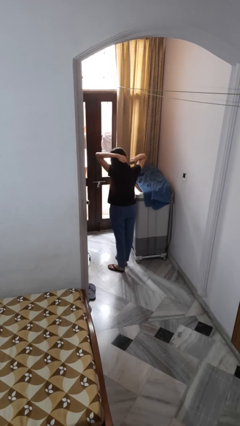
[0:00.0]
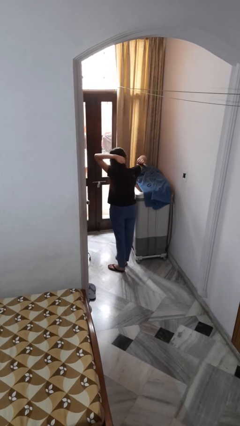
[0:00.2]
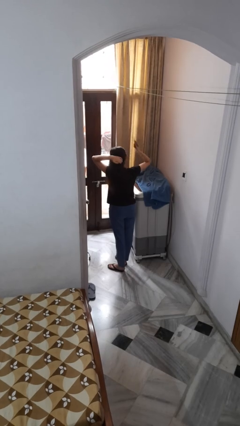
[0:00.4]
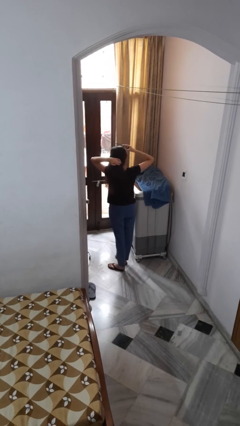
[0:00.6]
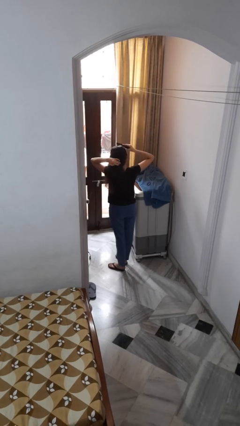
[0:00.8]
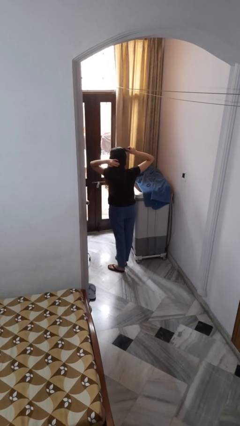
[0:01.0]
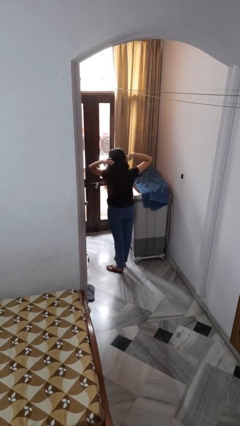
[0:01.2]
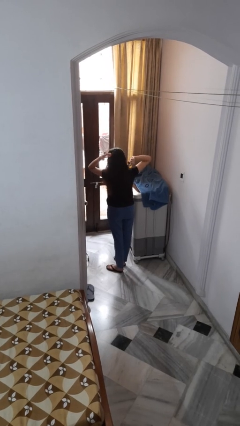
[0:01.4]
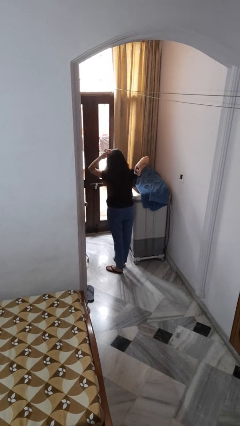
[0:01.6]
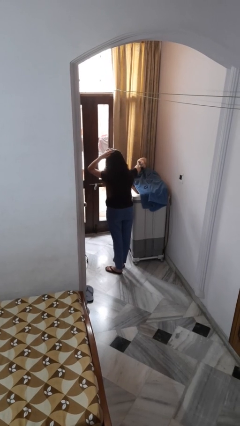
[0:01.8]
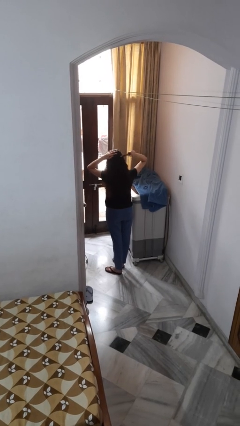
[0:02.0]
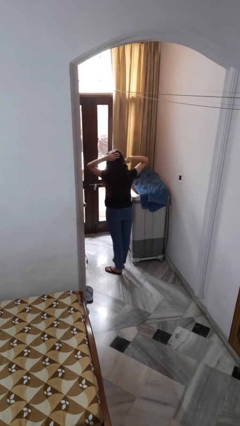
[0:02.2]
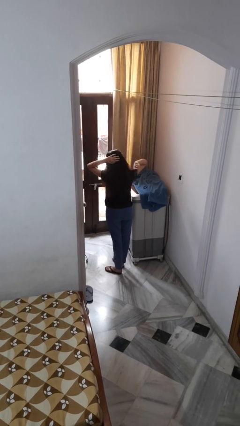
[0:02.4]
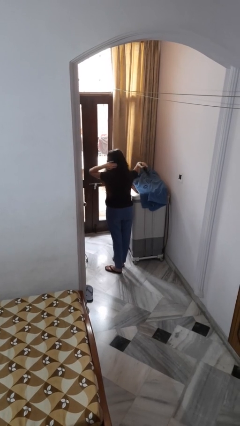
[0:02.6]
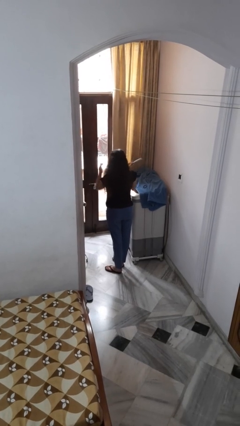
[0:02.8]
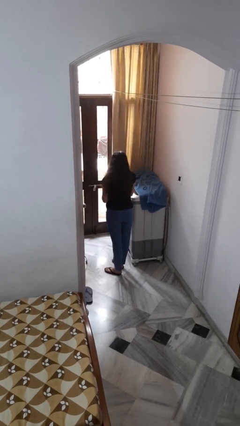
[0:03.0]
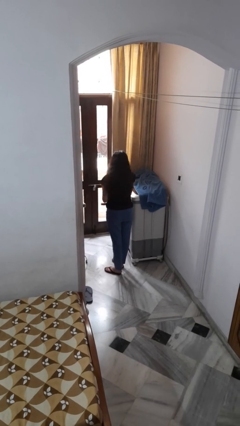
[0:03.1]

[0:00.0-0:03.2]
person brushes hair

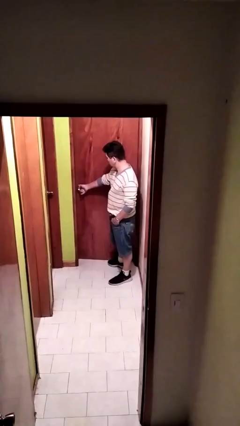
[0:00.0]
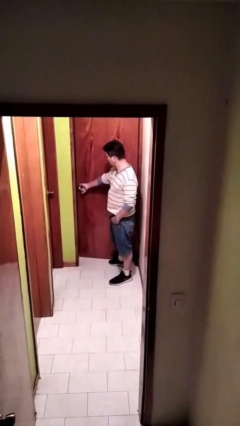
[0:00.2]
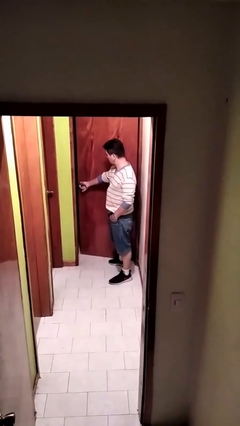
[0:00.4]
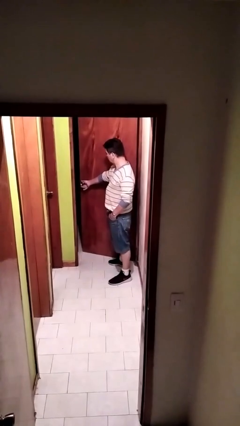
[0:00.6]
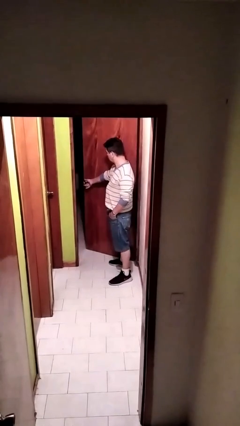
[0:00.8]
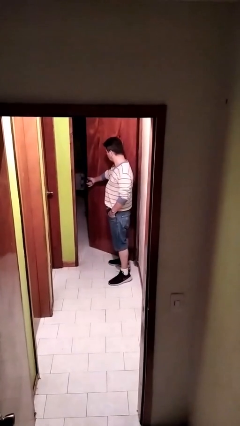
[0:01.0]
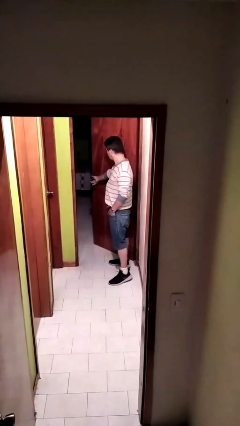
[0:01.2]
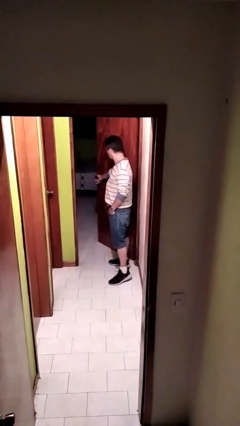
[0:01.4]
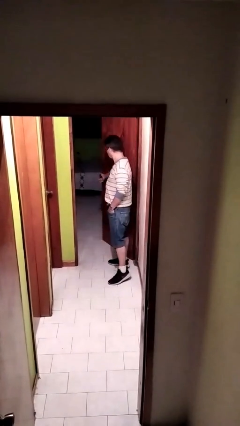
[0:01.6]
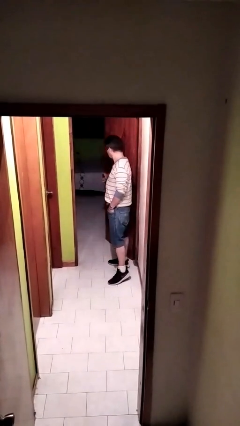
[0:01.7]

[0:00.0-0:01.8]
person opens facility door

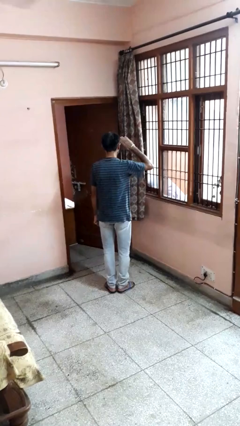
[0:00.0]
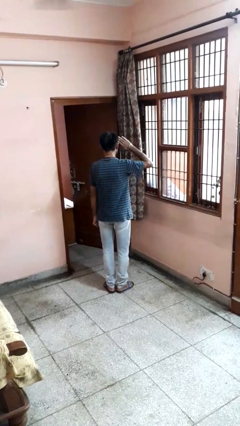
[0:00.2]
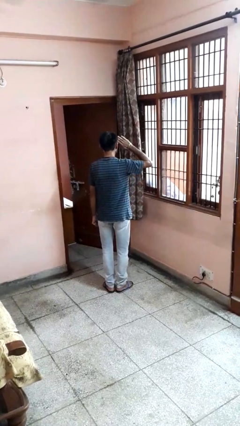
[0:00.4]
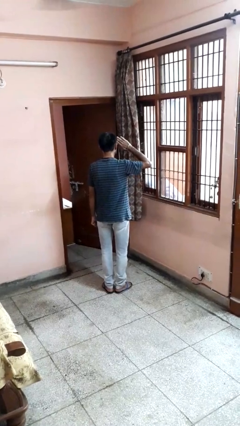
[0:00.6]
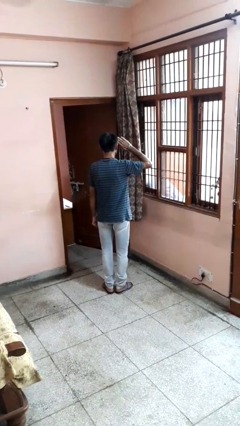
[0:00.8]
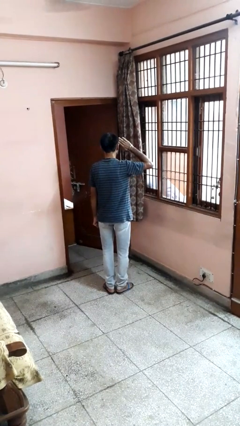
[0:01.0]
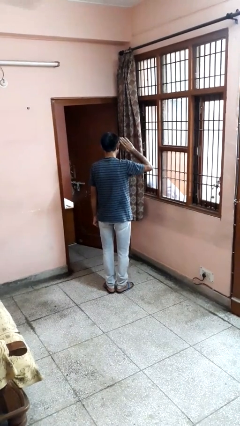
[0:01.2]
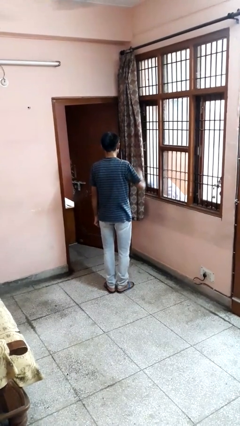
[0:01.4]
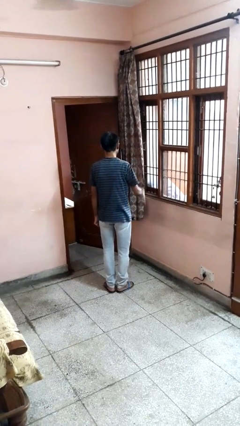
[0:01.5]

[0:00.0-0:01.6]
person salutes

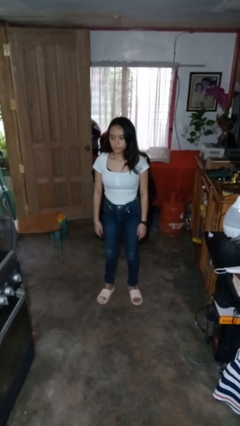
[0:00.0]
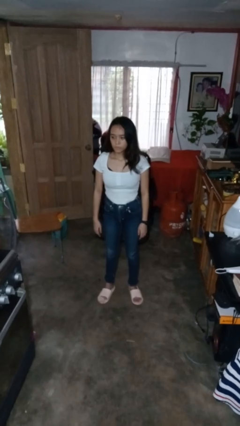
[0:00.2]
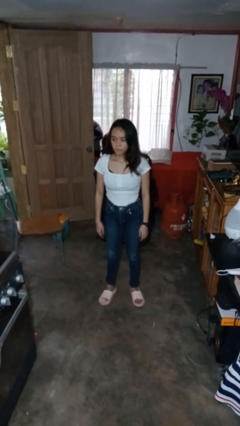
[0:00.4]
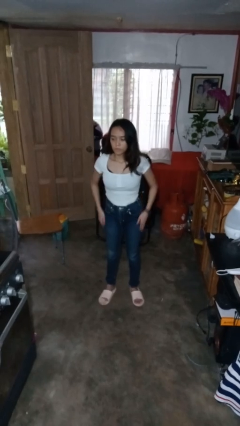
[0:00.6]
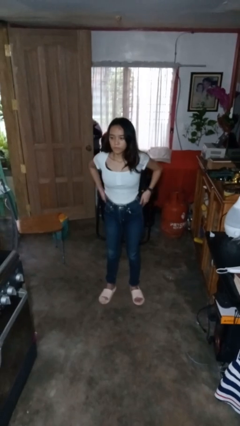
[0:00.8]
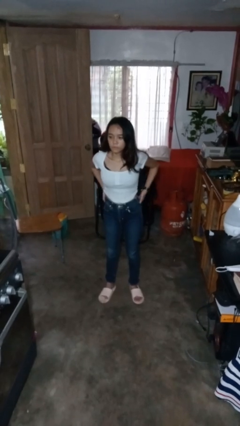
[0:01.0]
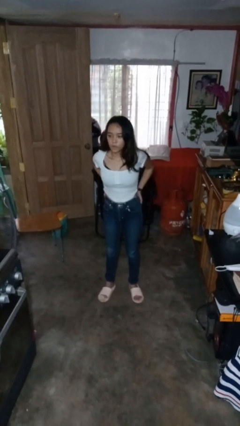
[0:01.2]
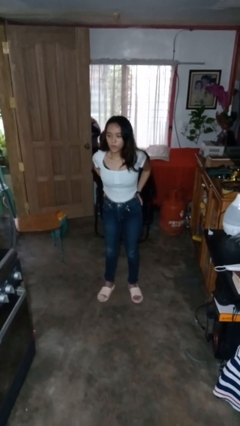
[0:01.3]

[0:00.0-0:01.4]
person puts hands in back pockets

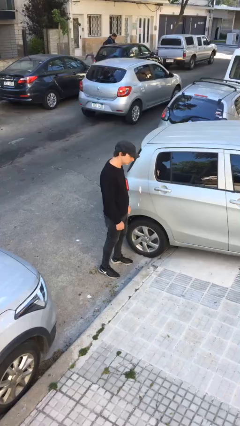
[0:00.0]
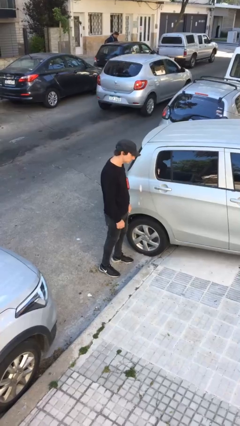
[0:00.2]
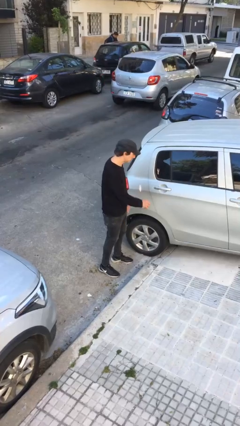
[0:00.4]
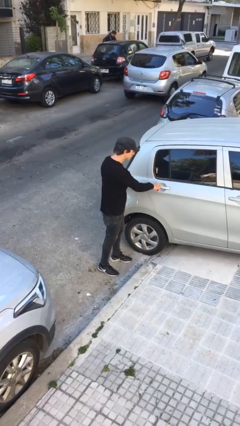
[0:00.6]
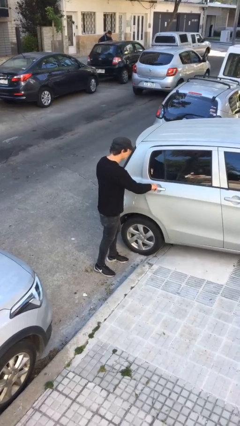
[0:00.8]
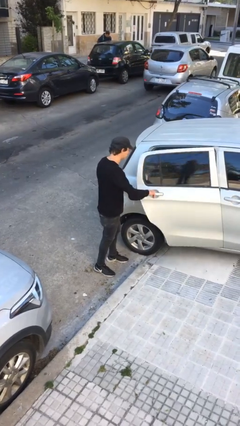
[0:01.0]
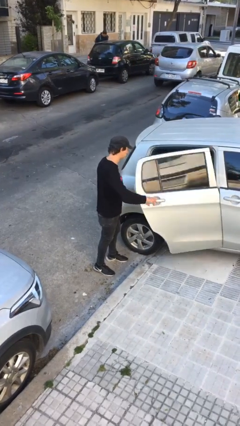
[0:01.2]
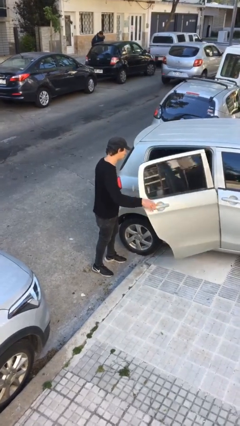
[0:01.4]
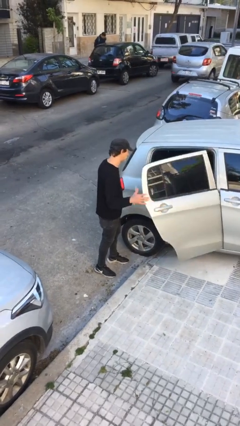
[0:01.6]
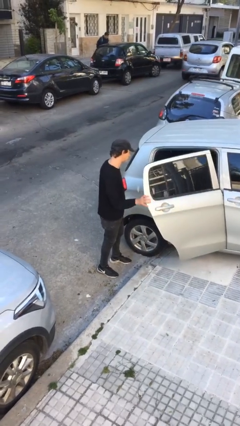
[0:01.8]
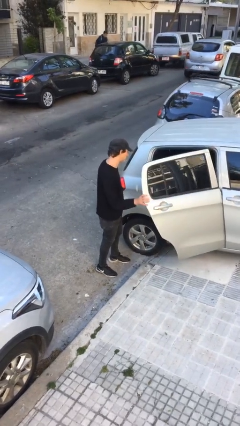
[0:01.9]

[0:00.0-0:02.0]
person opens car door

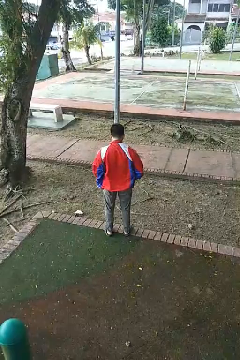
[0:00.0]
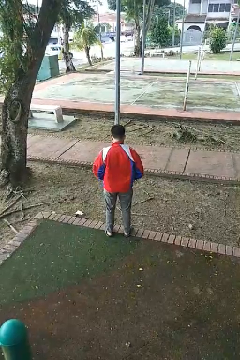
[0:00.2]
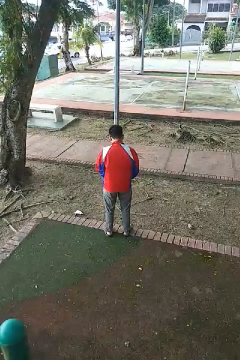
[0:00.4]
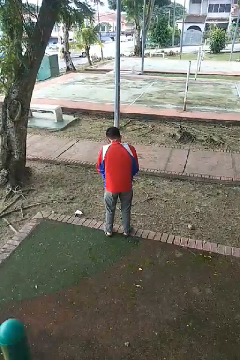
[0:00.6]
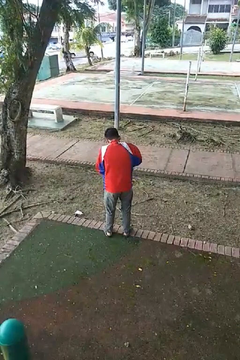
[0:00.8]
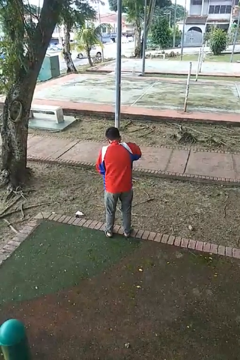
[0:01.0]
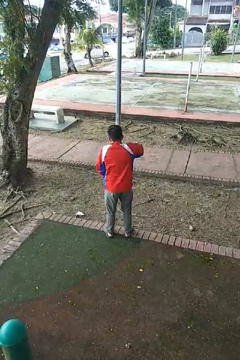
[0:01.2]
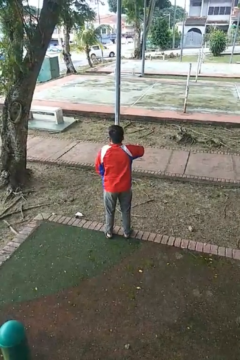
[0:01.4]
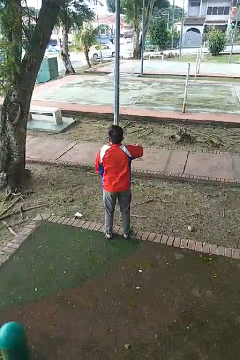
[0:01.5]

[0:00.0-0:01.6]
person zips up jacket

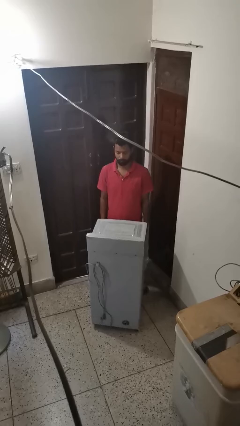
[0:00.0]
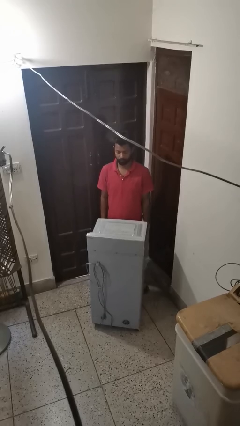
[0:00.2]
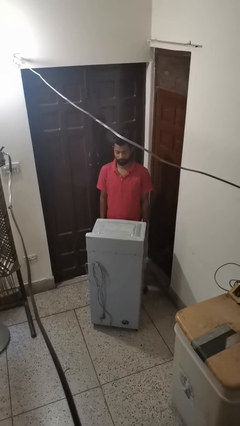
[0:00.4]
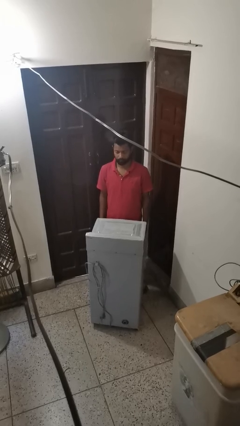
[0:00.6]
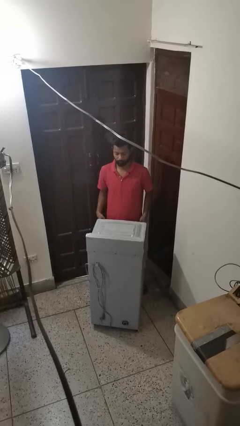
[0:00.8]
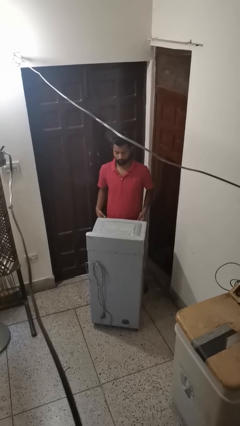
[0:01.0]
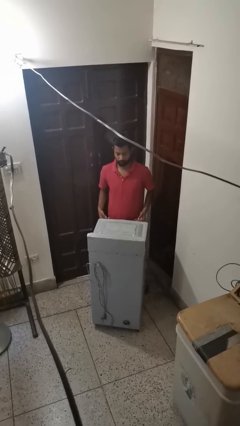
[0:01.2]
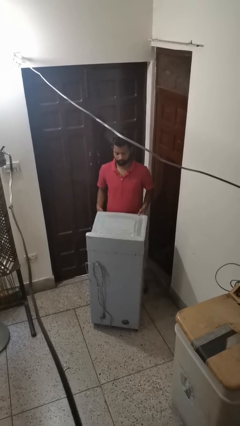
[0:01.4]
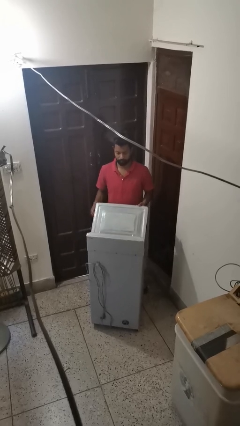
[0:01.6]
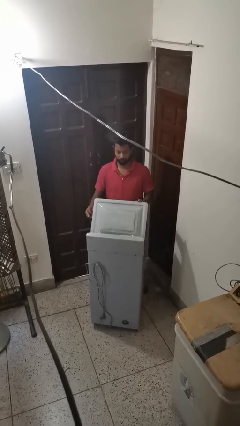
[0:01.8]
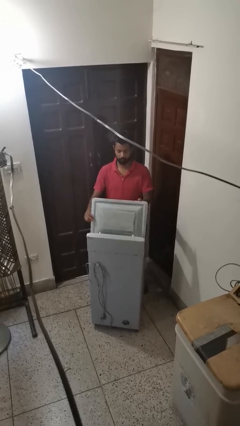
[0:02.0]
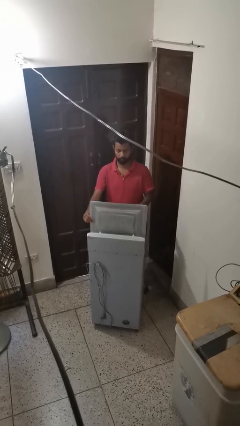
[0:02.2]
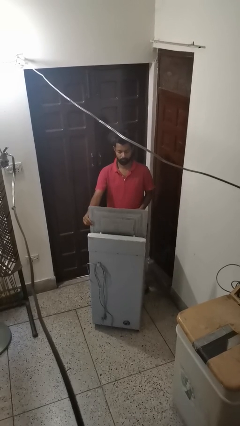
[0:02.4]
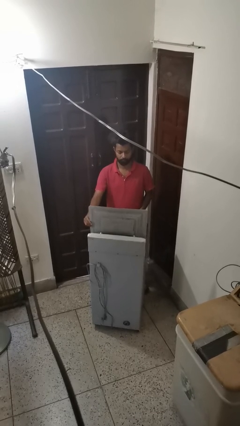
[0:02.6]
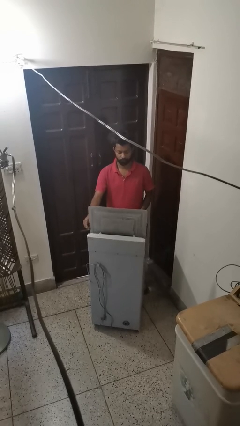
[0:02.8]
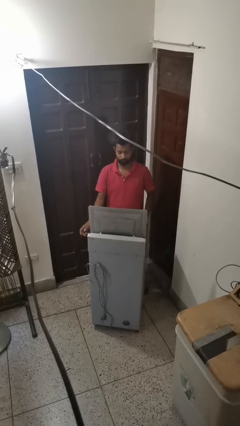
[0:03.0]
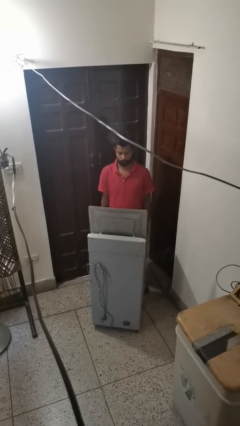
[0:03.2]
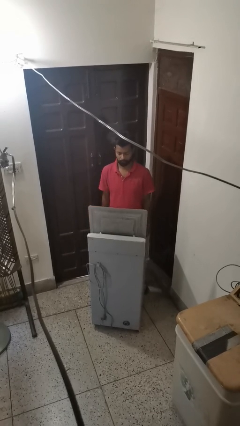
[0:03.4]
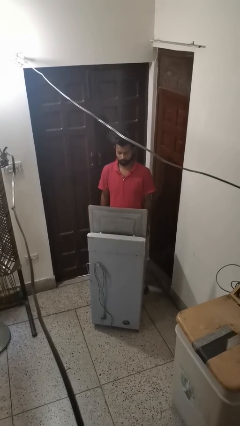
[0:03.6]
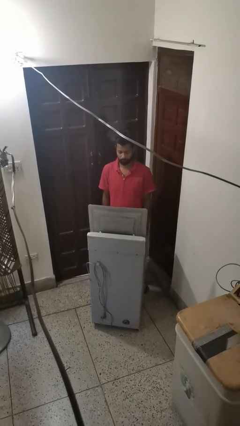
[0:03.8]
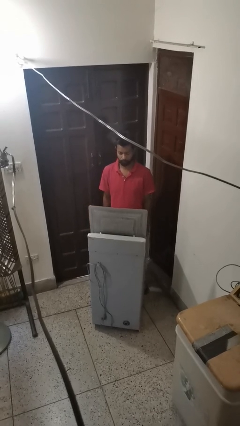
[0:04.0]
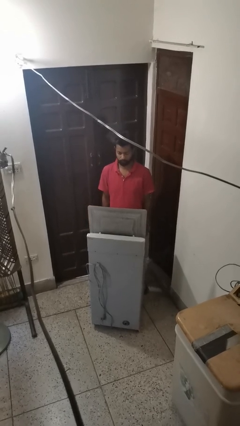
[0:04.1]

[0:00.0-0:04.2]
person opens clothes washer

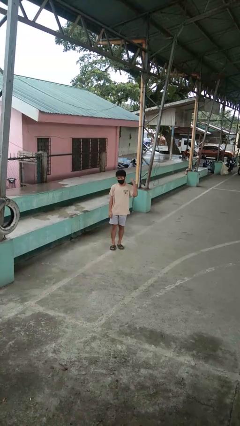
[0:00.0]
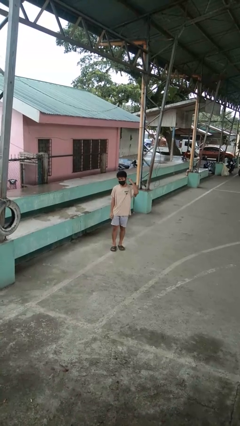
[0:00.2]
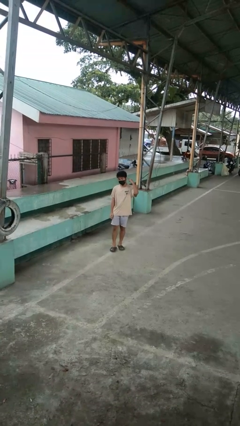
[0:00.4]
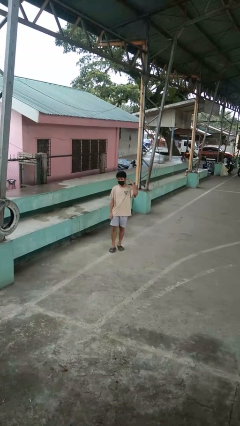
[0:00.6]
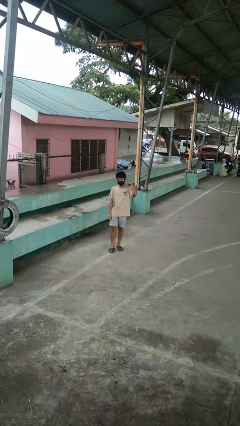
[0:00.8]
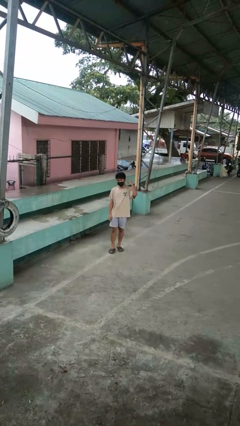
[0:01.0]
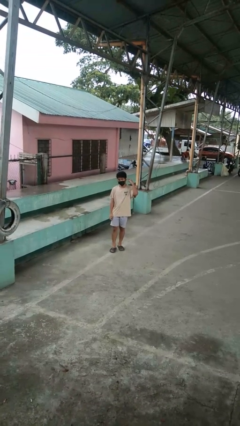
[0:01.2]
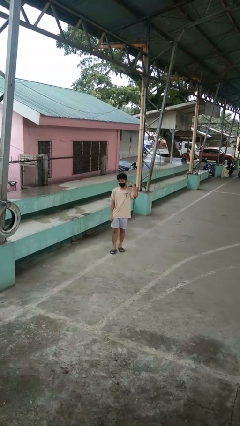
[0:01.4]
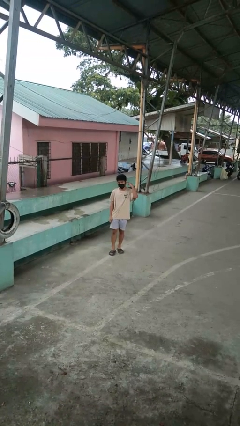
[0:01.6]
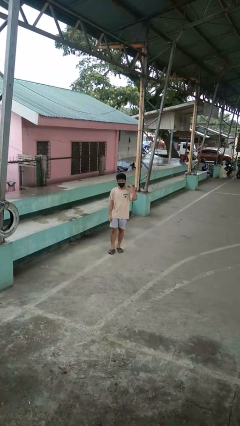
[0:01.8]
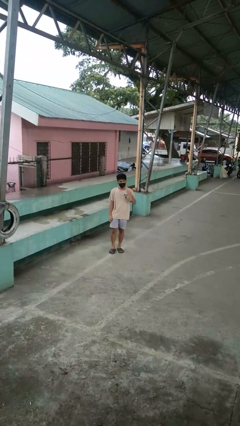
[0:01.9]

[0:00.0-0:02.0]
person gestures listen closely
